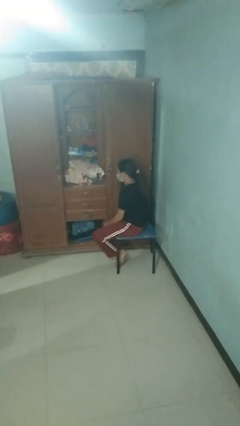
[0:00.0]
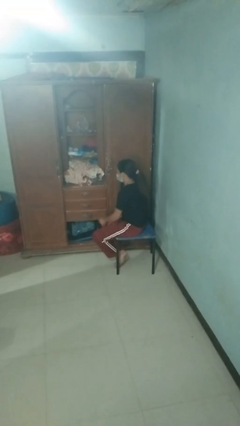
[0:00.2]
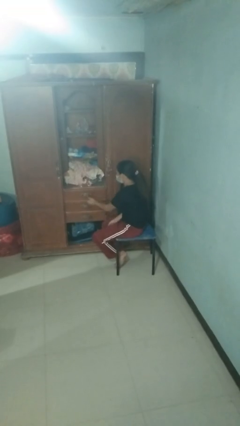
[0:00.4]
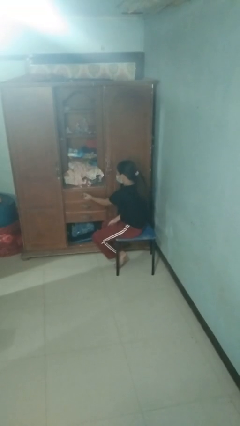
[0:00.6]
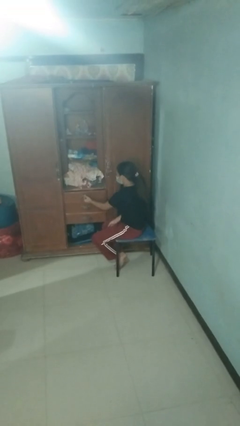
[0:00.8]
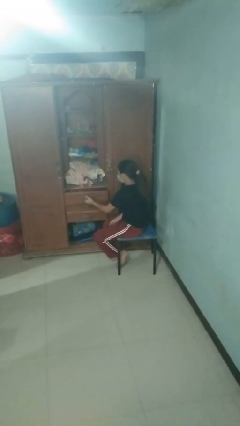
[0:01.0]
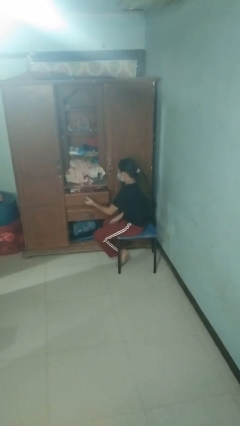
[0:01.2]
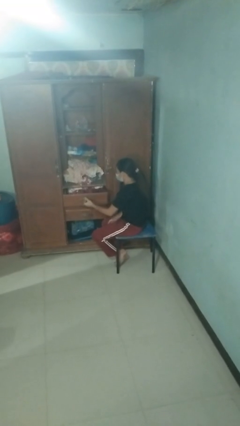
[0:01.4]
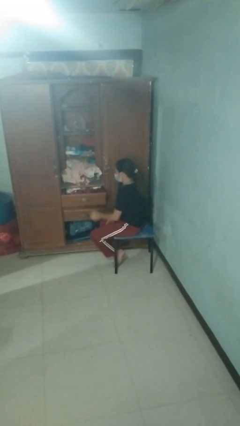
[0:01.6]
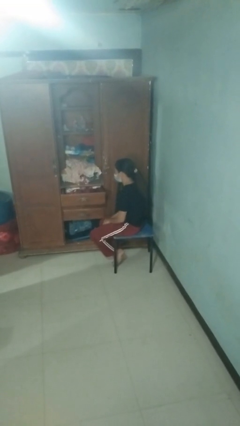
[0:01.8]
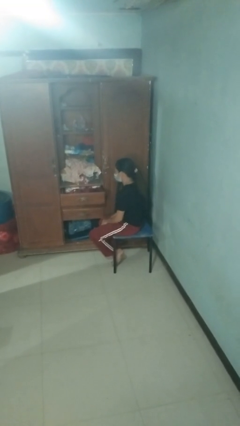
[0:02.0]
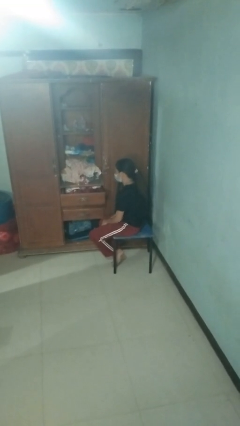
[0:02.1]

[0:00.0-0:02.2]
person opens dresser drawer

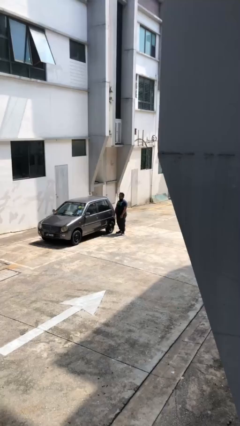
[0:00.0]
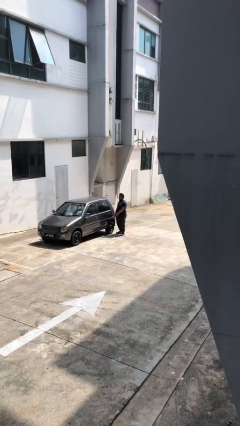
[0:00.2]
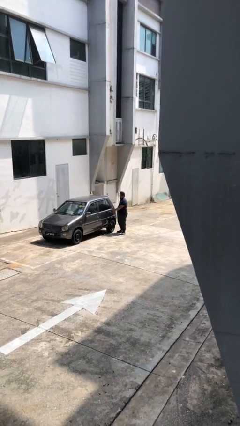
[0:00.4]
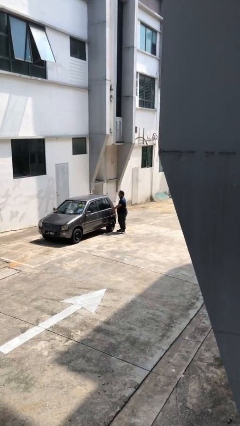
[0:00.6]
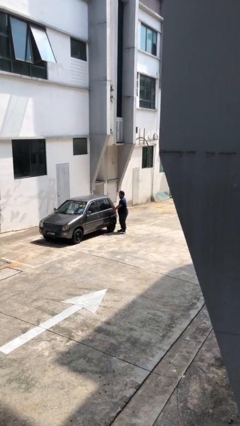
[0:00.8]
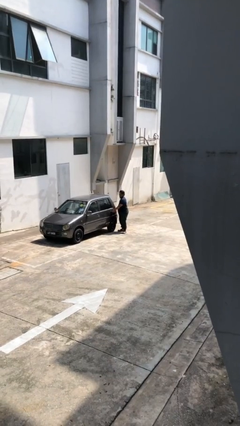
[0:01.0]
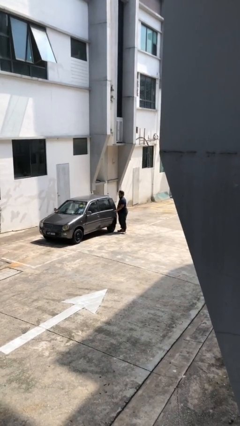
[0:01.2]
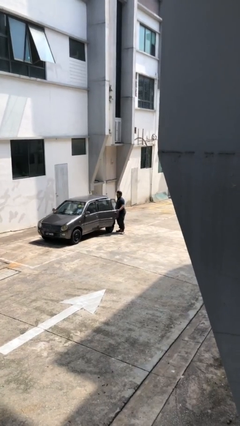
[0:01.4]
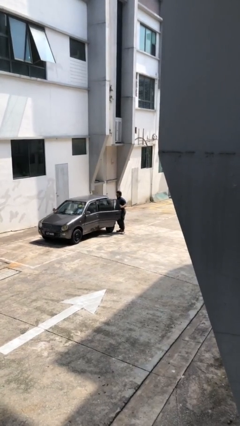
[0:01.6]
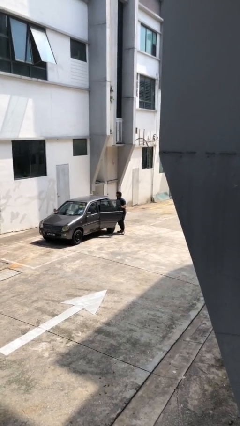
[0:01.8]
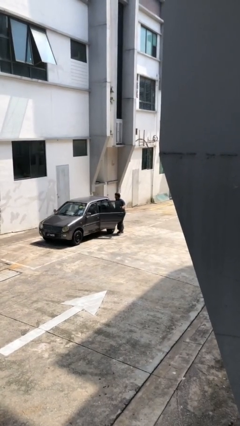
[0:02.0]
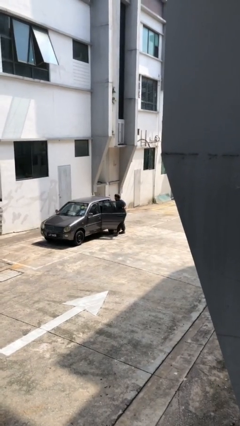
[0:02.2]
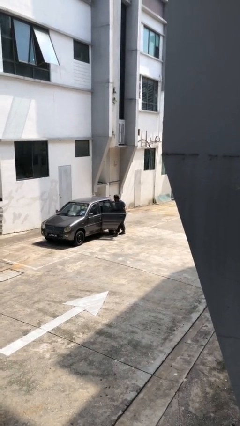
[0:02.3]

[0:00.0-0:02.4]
person opens car door

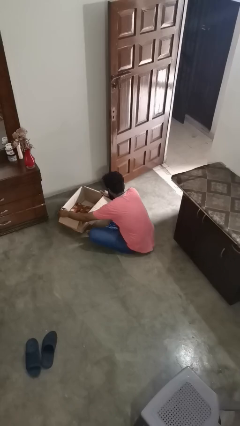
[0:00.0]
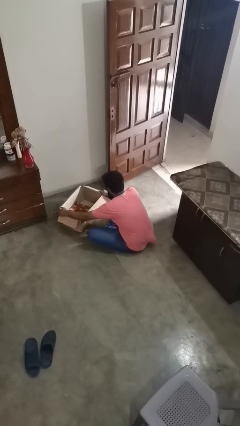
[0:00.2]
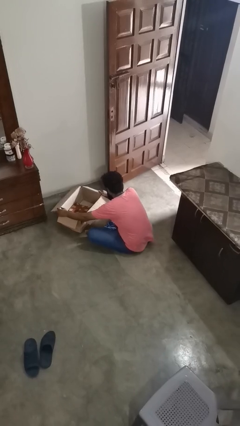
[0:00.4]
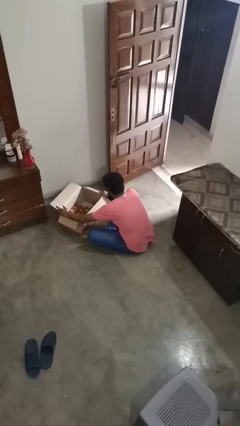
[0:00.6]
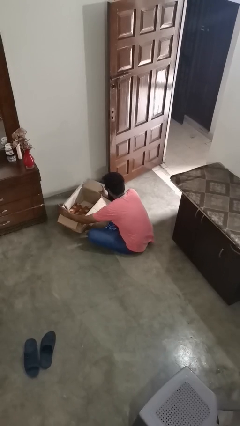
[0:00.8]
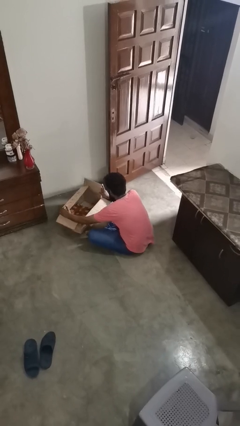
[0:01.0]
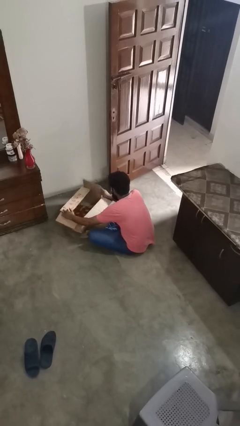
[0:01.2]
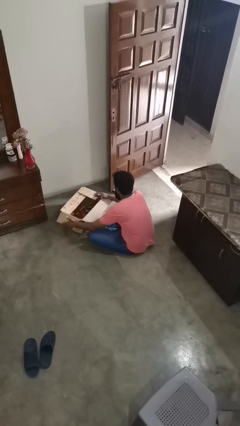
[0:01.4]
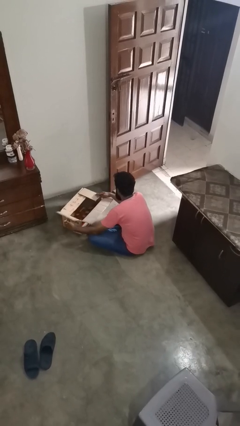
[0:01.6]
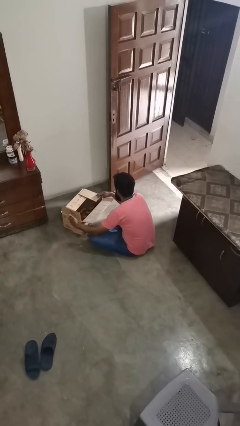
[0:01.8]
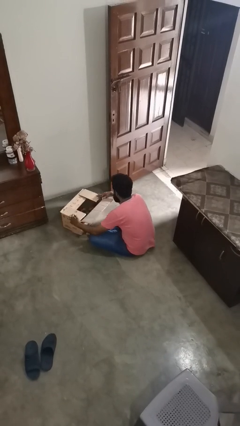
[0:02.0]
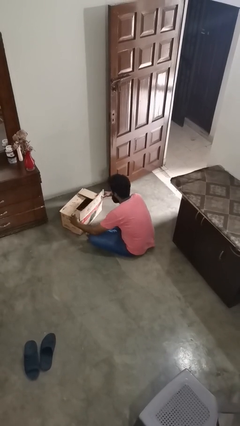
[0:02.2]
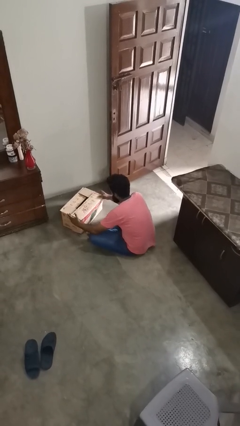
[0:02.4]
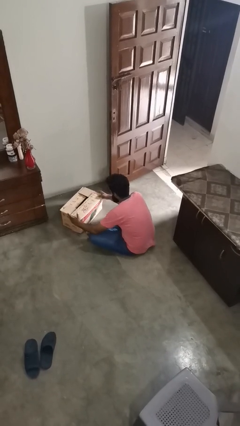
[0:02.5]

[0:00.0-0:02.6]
person closes box

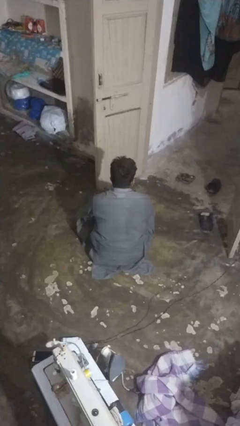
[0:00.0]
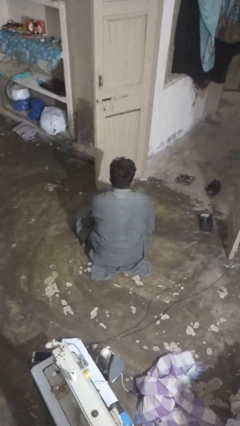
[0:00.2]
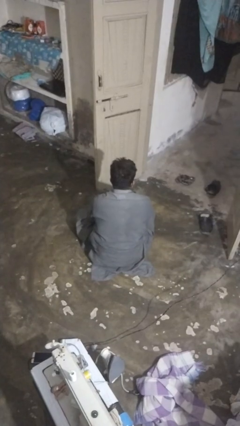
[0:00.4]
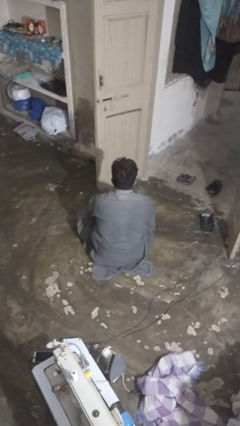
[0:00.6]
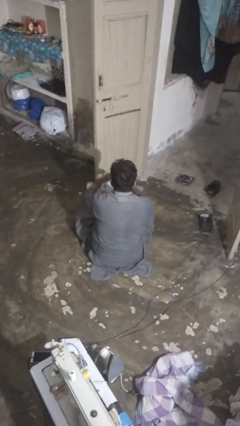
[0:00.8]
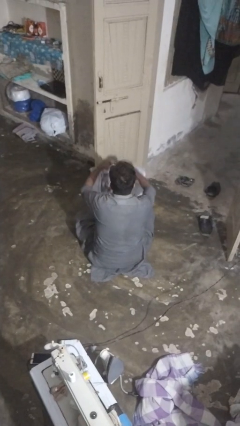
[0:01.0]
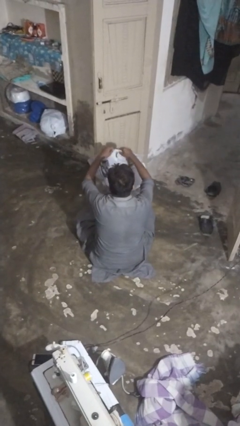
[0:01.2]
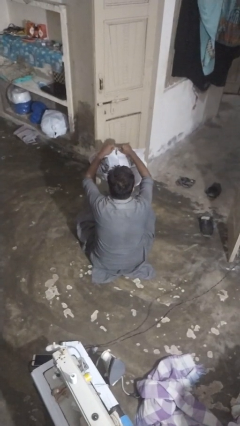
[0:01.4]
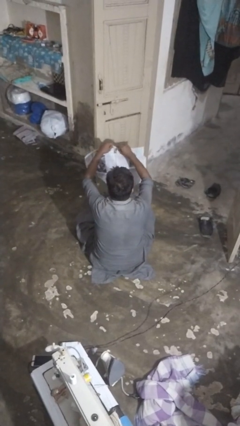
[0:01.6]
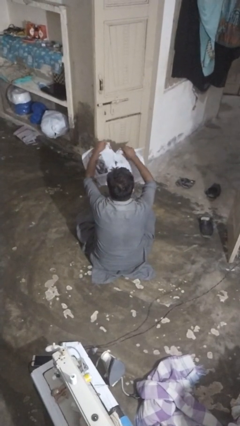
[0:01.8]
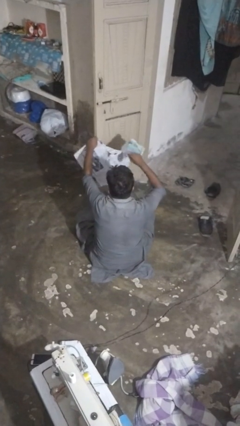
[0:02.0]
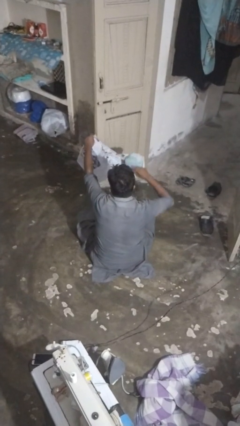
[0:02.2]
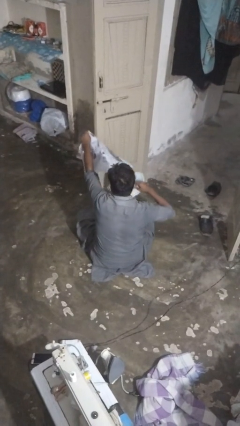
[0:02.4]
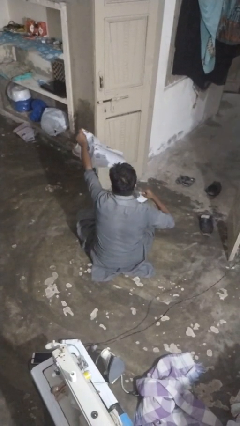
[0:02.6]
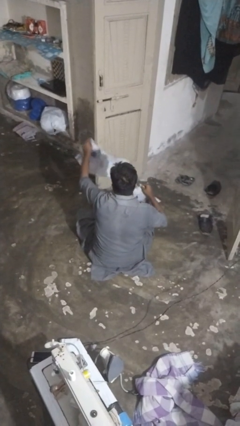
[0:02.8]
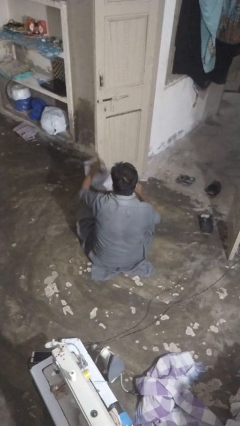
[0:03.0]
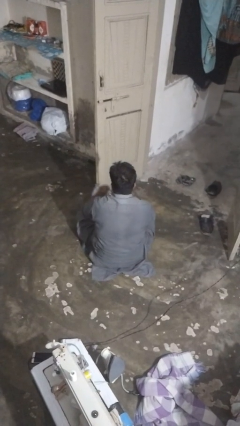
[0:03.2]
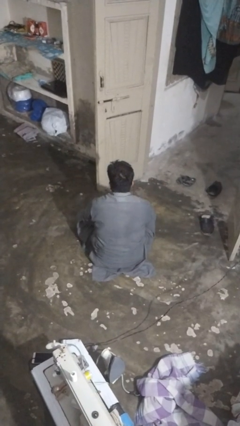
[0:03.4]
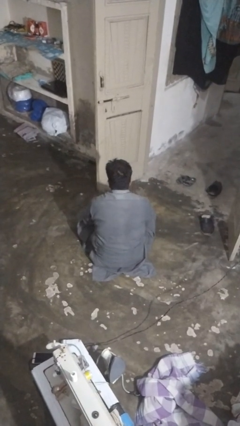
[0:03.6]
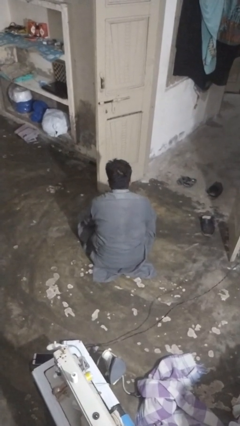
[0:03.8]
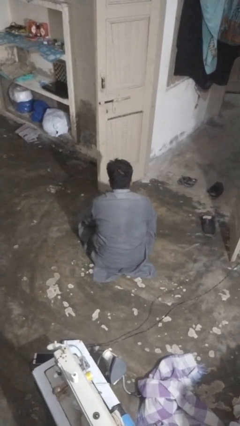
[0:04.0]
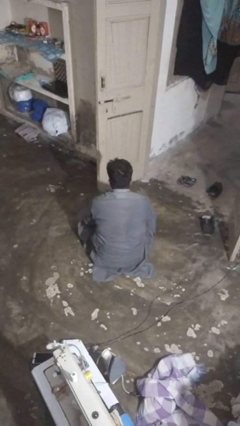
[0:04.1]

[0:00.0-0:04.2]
person tears paper

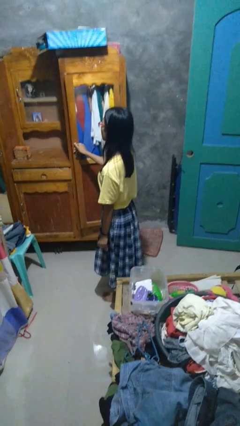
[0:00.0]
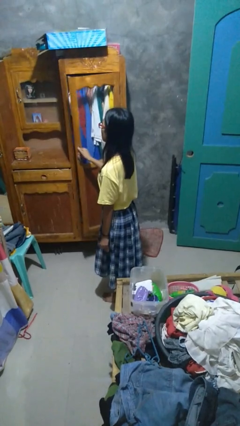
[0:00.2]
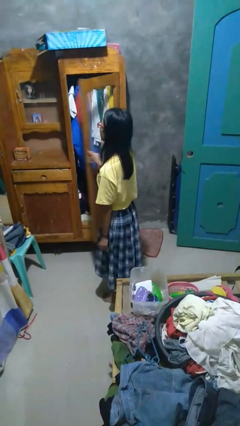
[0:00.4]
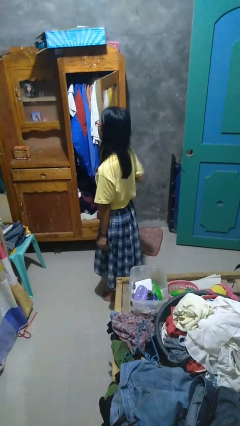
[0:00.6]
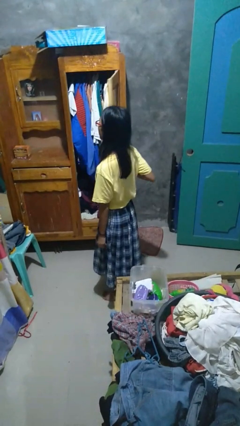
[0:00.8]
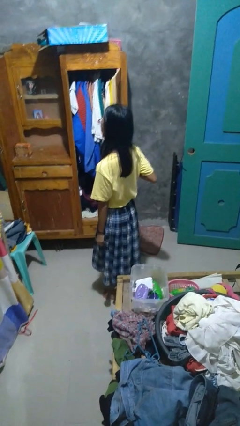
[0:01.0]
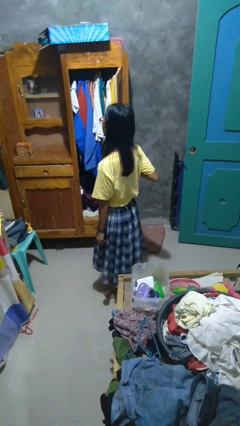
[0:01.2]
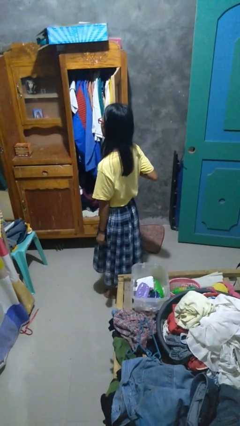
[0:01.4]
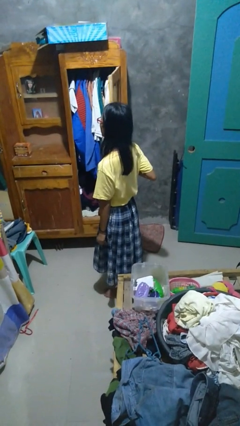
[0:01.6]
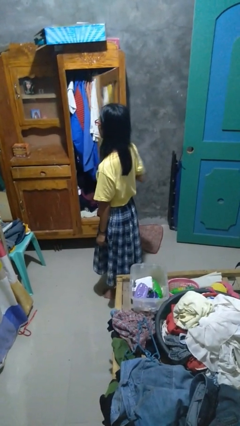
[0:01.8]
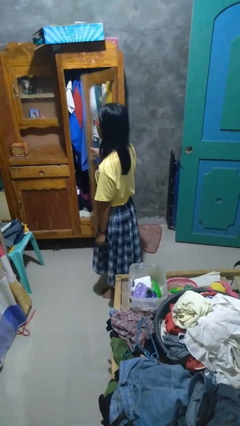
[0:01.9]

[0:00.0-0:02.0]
person opens closet door

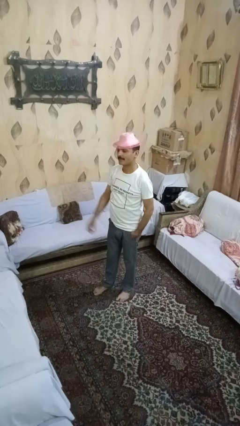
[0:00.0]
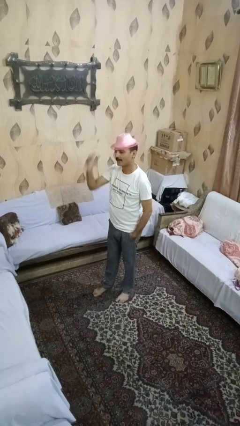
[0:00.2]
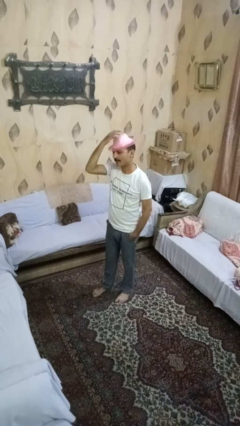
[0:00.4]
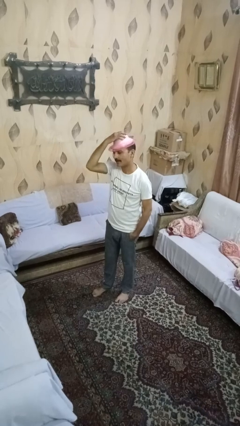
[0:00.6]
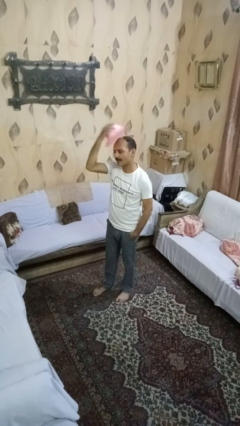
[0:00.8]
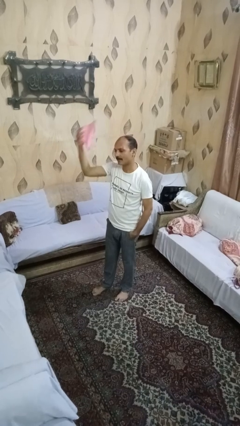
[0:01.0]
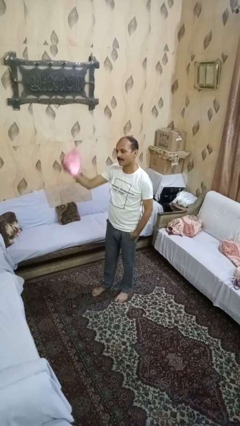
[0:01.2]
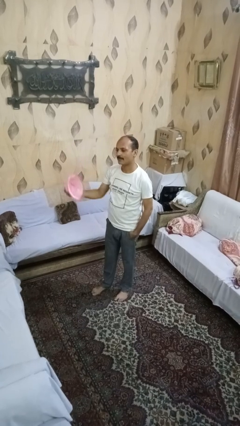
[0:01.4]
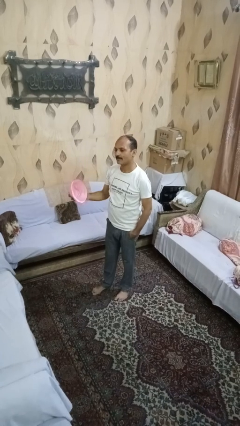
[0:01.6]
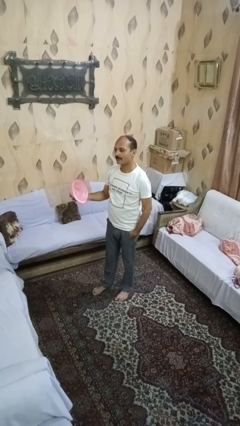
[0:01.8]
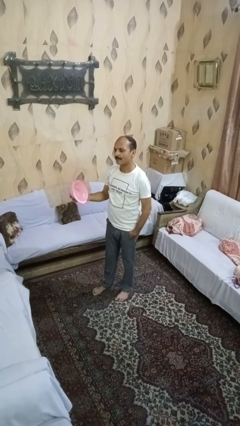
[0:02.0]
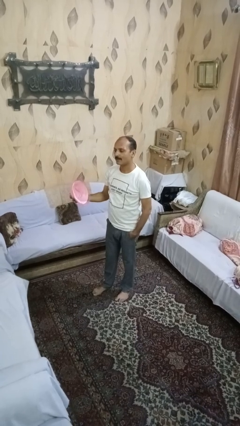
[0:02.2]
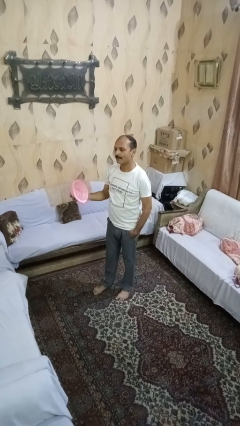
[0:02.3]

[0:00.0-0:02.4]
person takes off hat

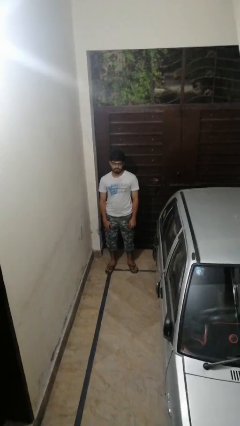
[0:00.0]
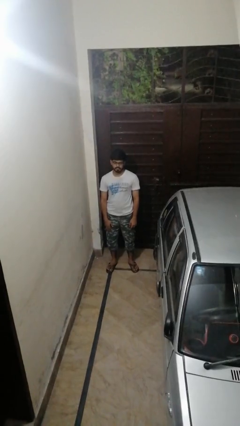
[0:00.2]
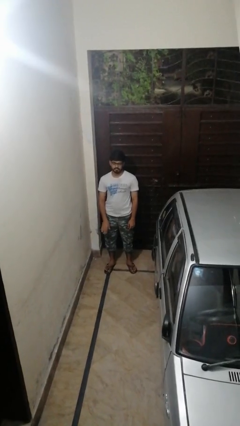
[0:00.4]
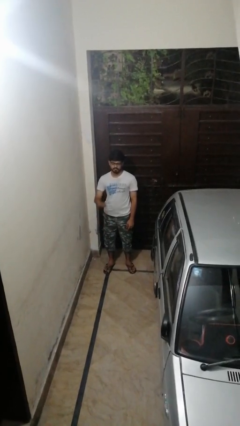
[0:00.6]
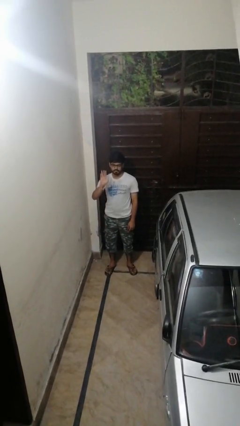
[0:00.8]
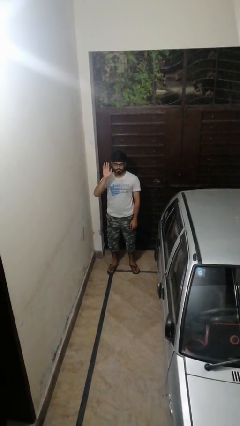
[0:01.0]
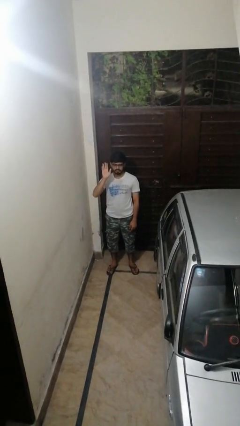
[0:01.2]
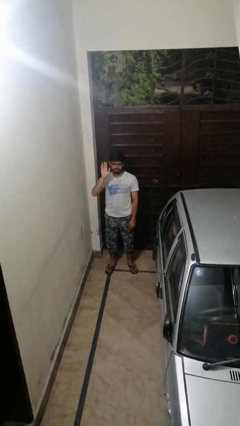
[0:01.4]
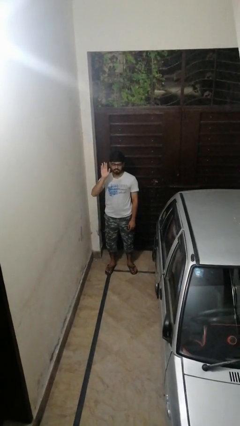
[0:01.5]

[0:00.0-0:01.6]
person gestures raise hand
